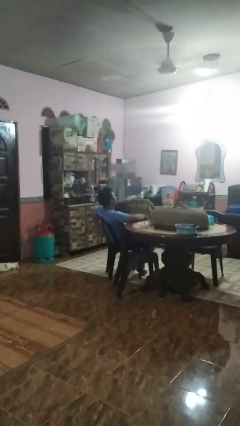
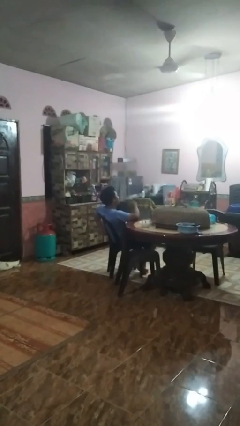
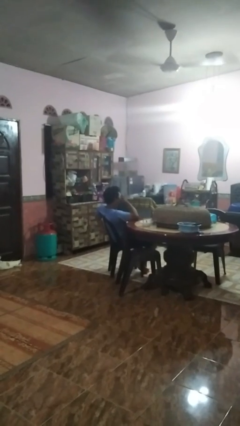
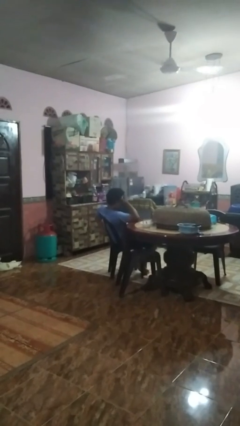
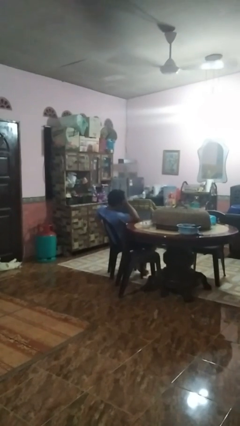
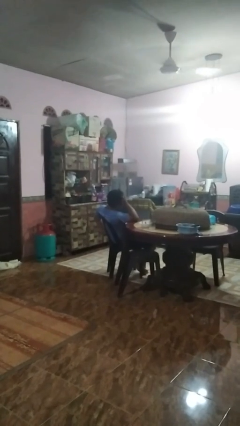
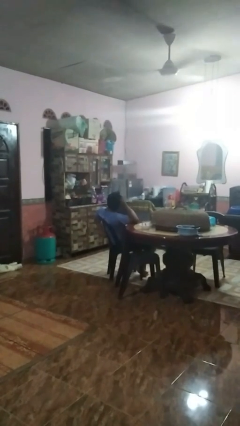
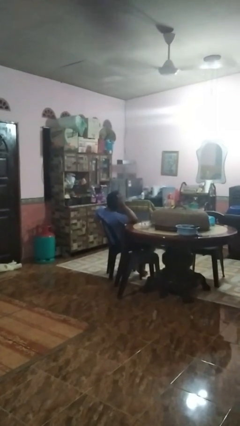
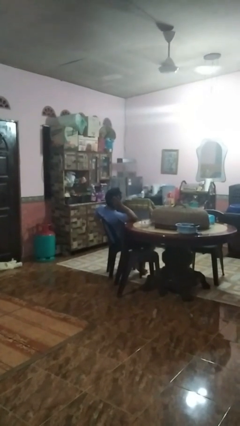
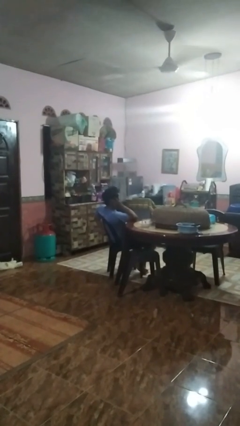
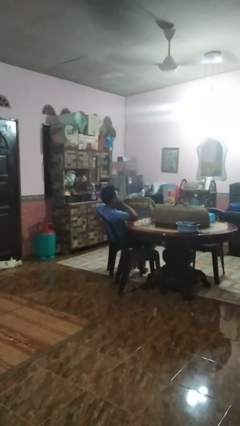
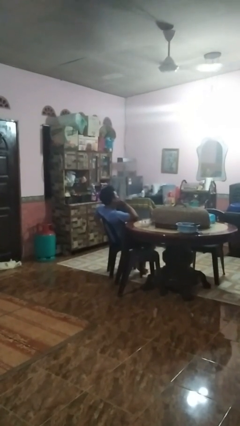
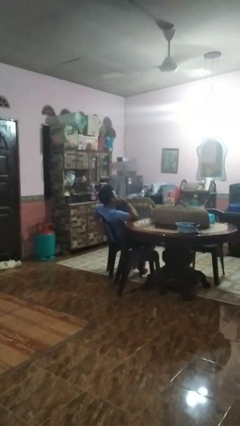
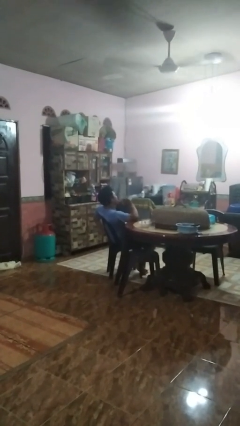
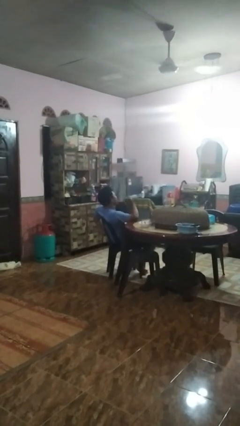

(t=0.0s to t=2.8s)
person strokes hair

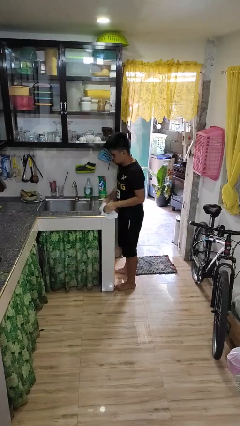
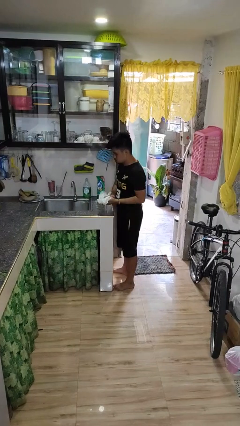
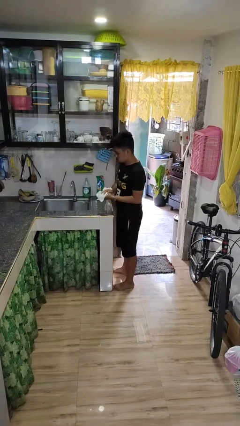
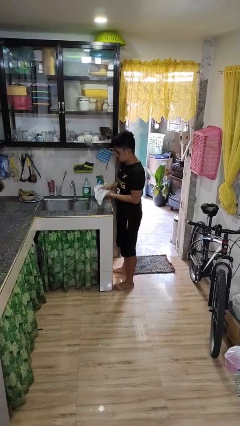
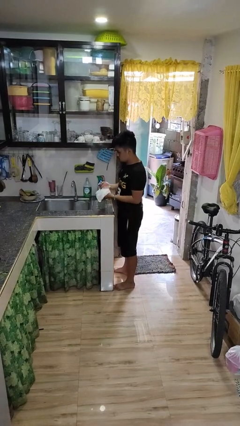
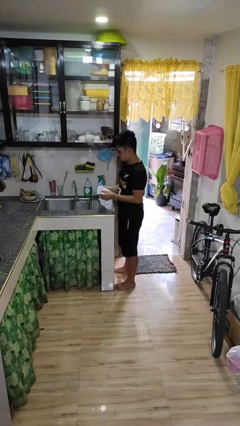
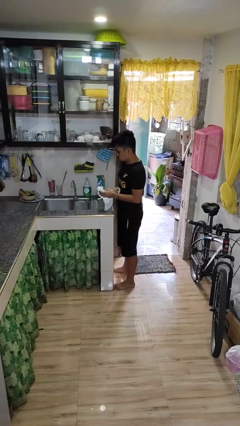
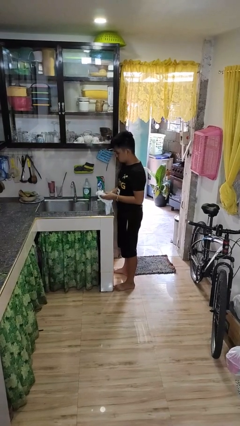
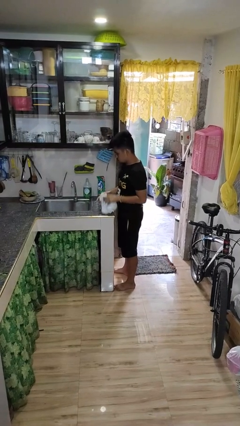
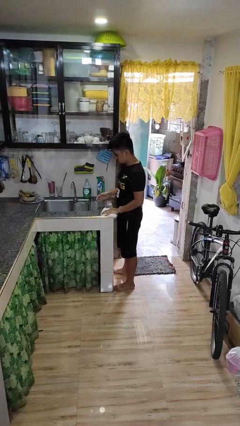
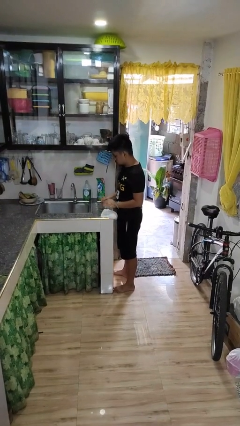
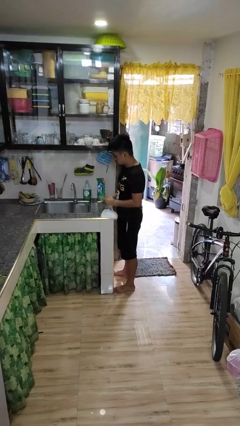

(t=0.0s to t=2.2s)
person dries hands with towel

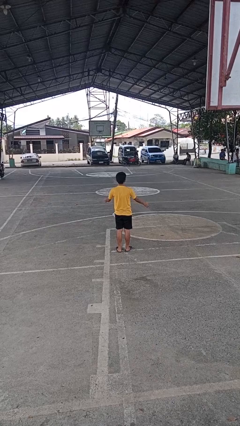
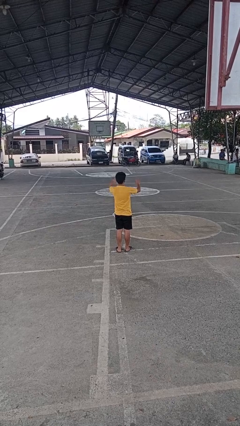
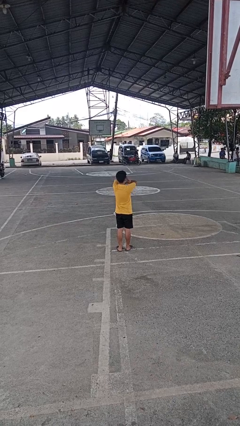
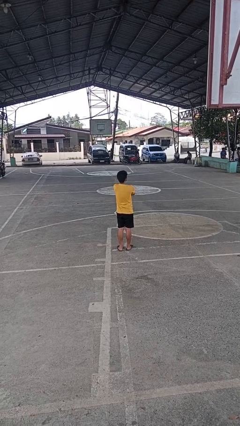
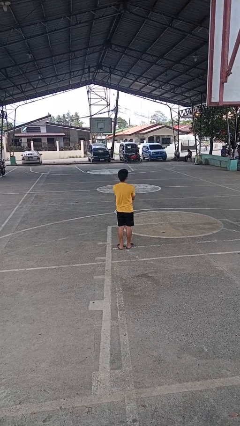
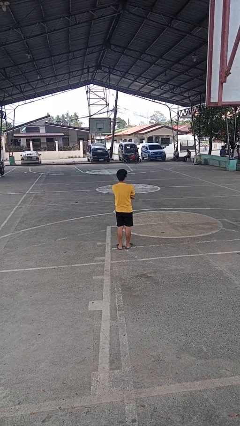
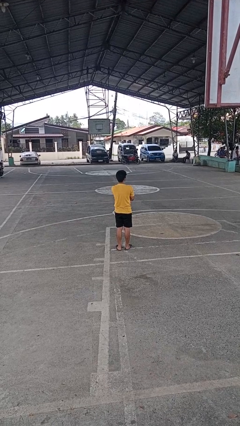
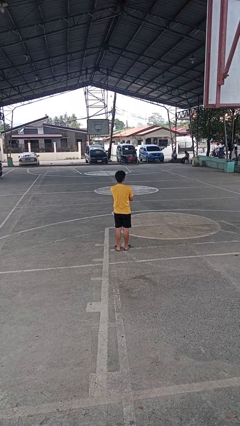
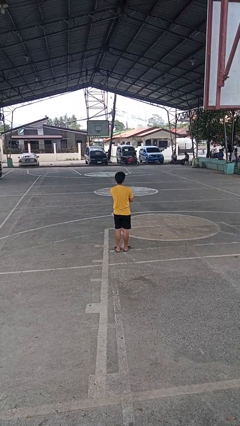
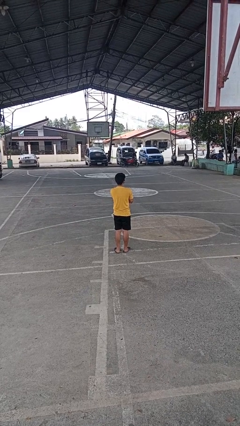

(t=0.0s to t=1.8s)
person crosses arms

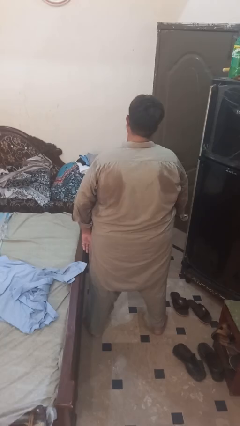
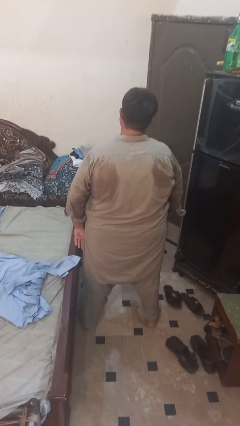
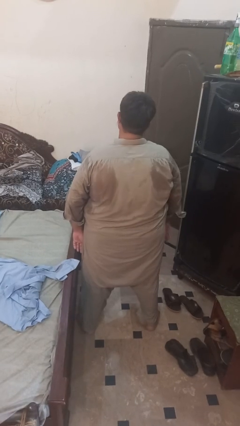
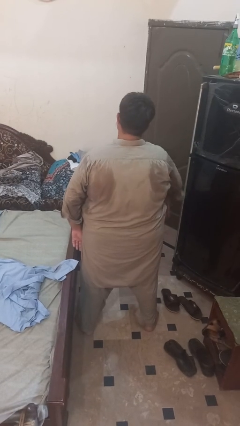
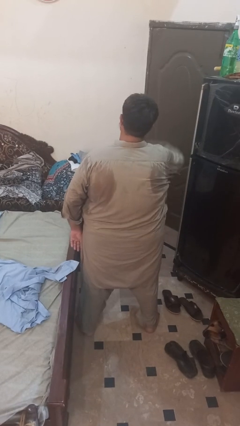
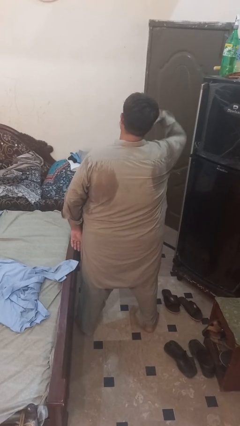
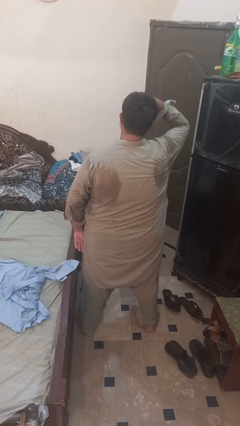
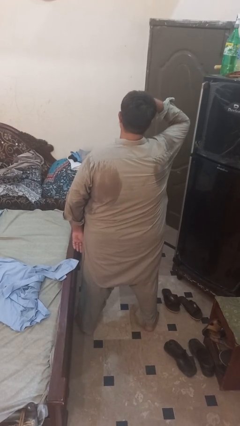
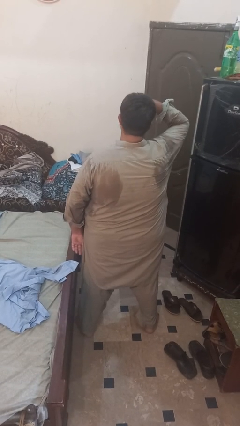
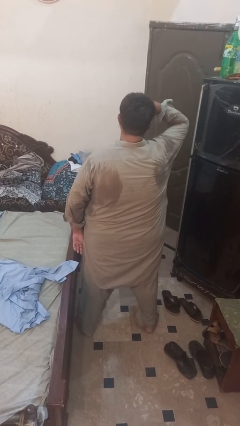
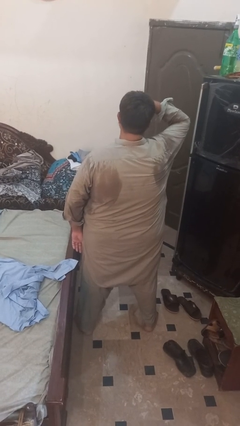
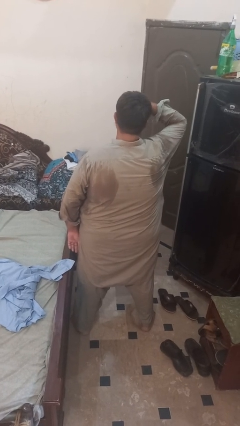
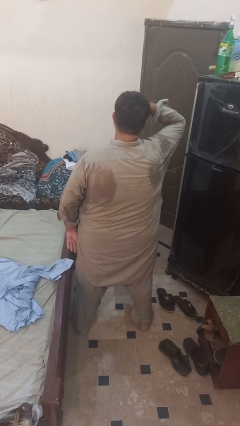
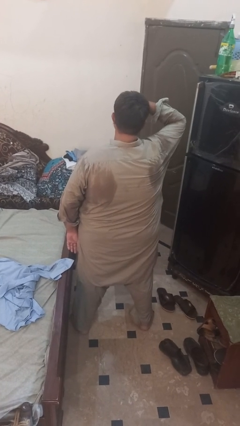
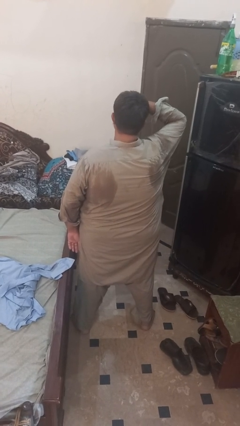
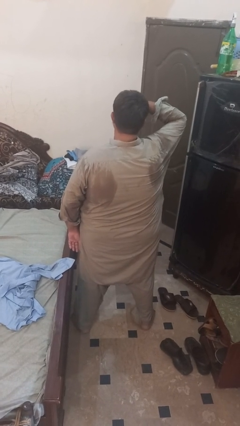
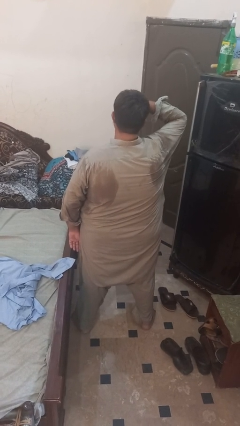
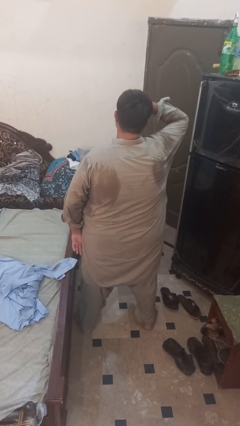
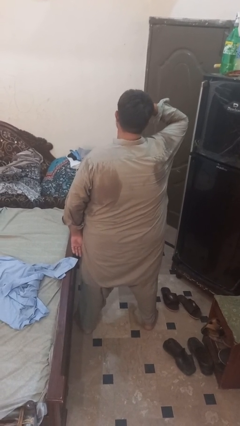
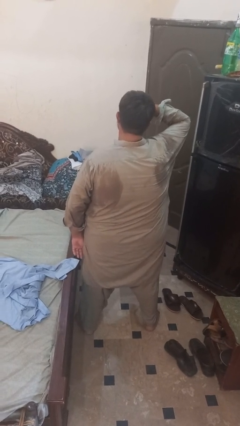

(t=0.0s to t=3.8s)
person shades eyes

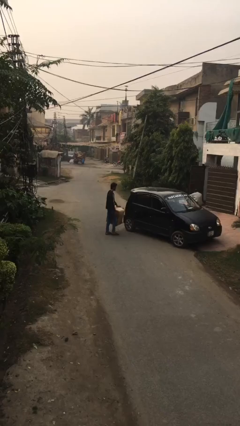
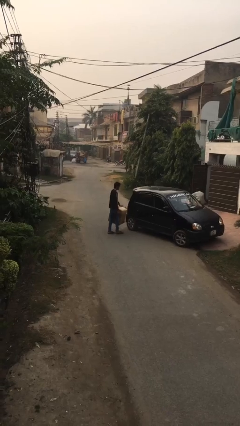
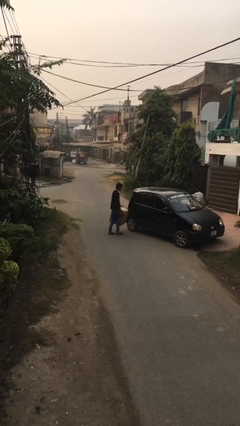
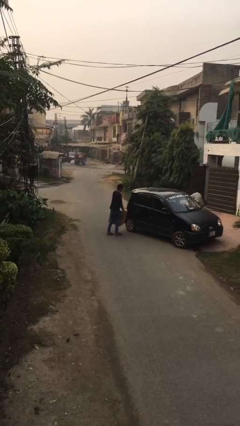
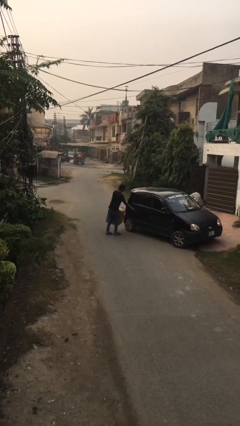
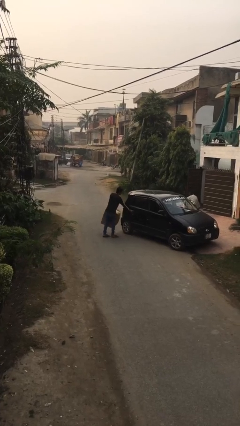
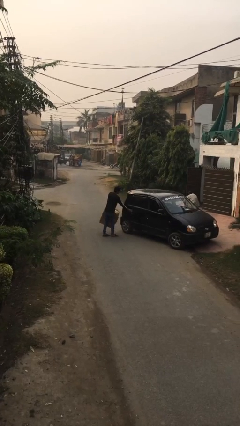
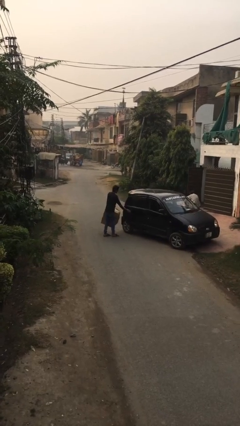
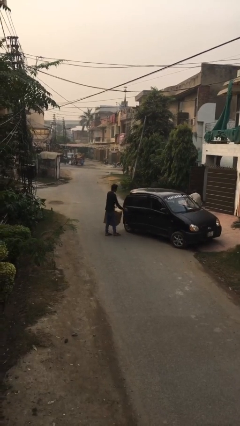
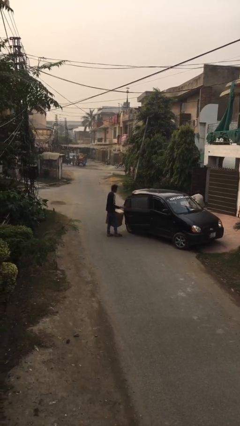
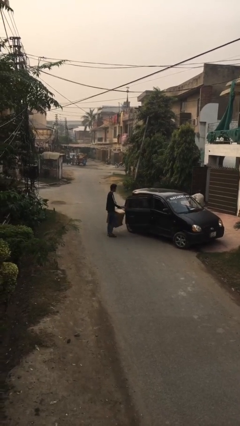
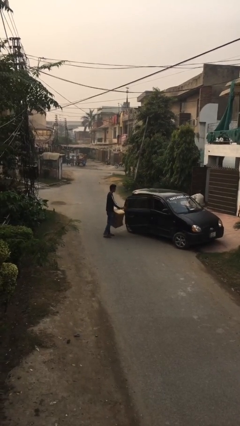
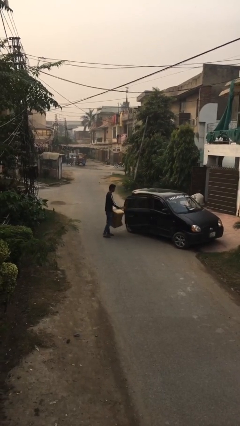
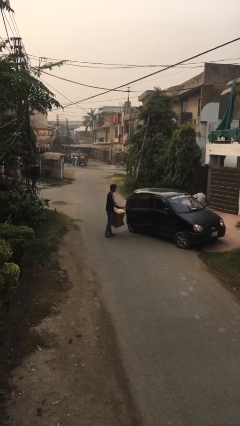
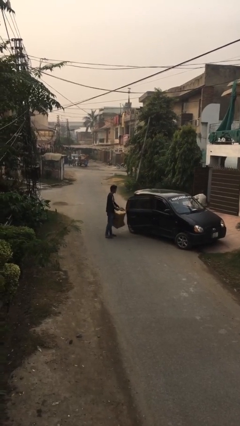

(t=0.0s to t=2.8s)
person opens car door

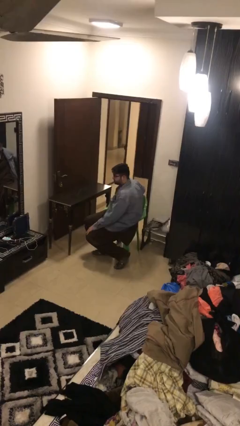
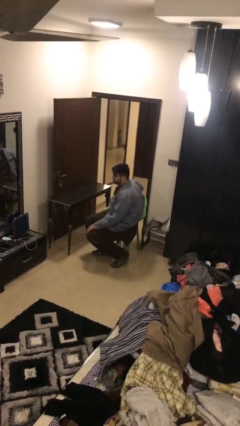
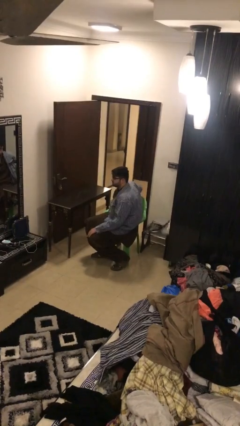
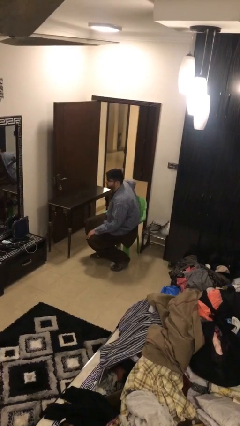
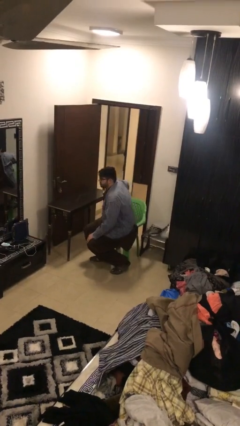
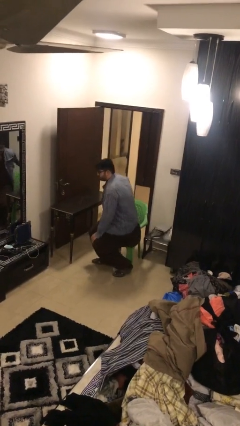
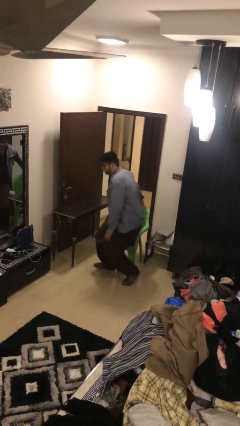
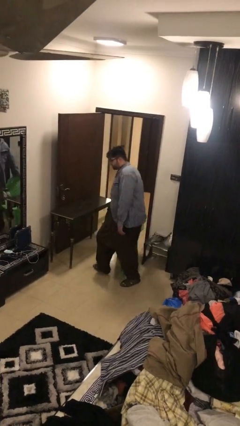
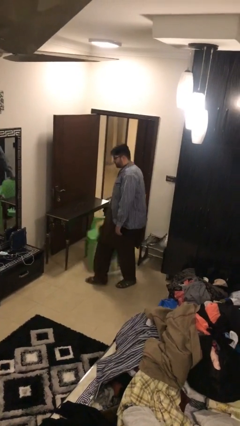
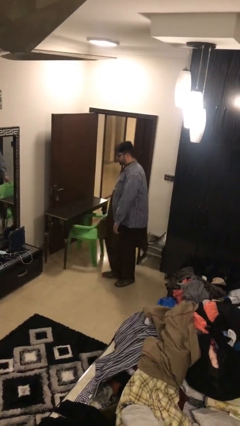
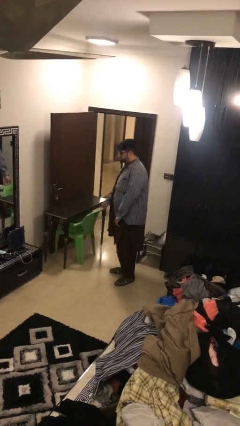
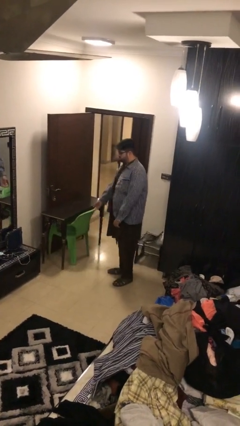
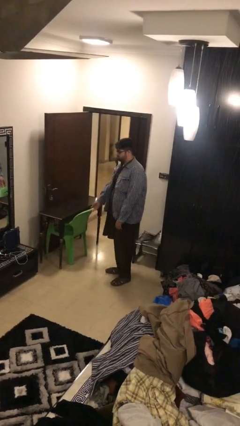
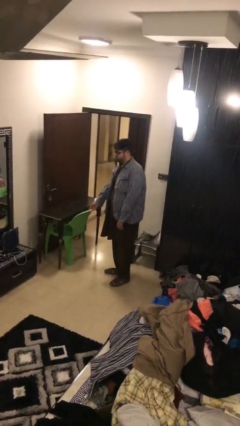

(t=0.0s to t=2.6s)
person stands up

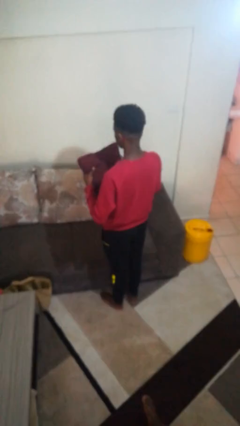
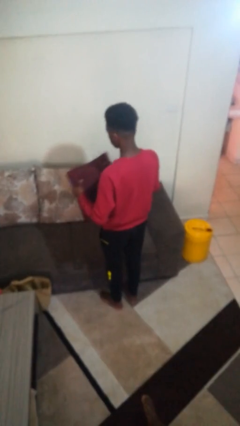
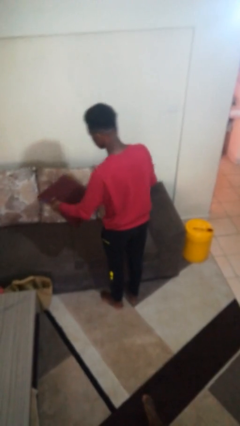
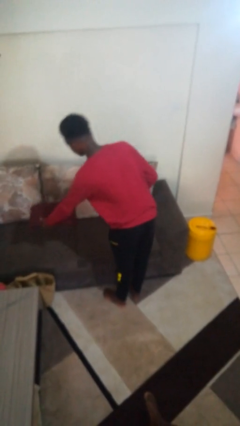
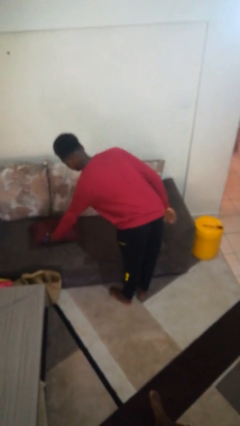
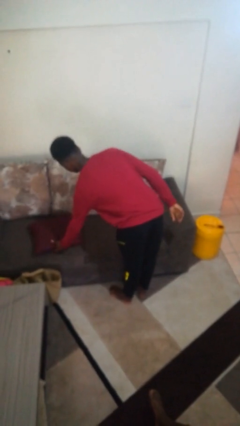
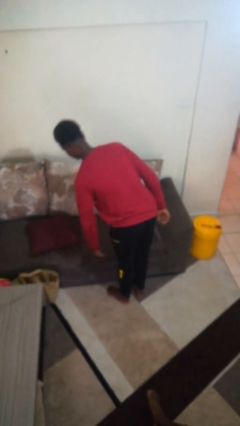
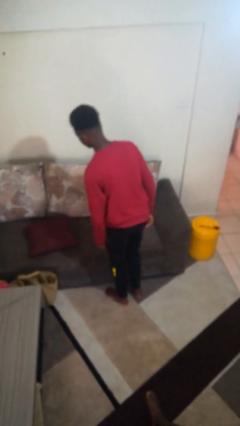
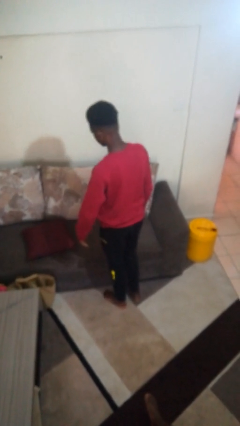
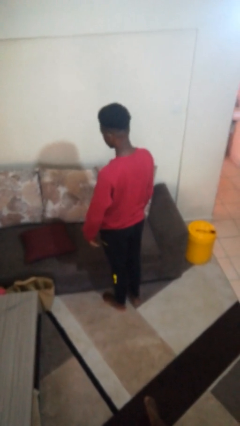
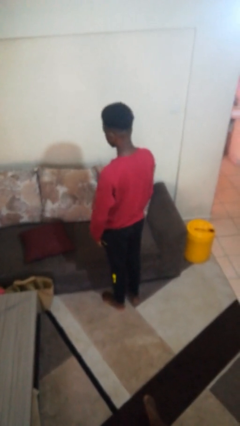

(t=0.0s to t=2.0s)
person puts down object on couch
